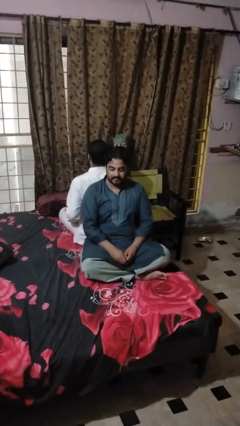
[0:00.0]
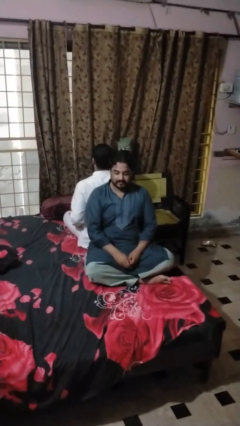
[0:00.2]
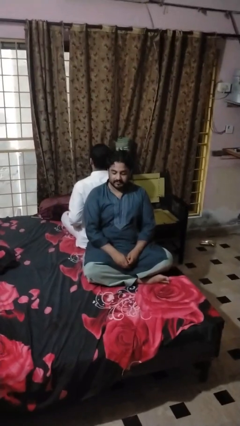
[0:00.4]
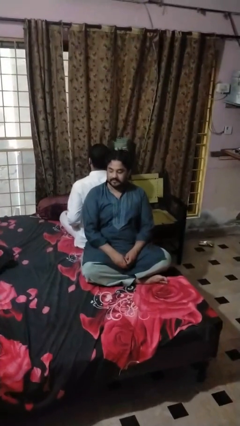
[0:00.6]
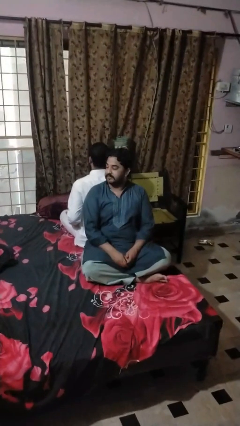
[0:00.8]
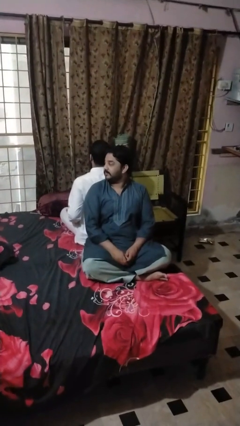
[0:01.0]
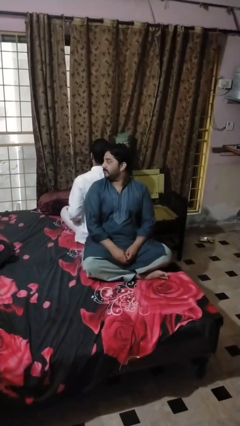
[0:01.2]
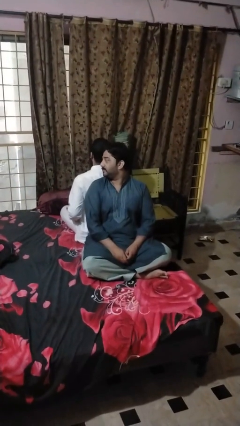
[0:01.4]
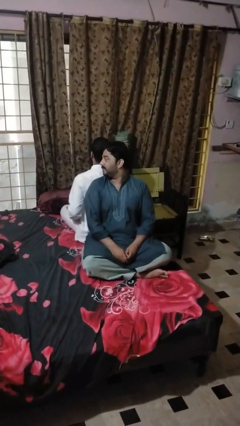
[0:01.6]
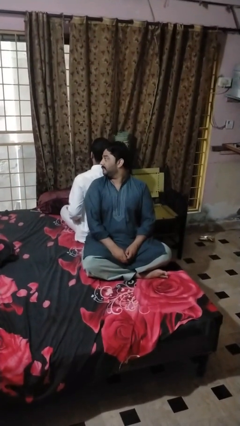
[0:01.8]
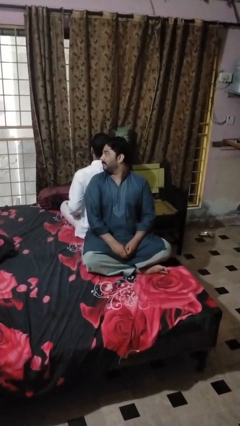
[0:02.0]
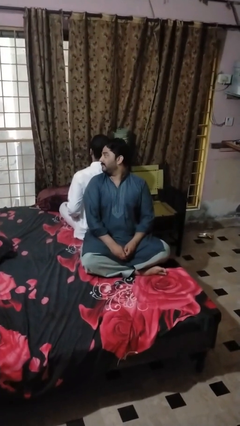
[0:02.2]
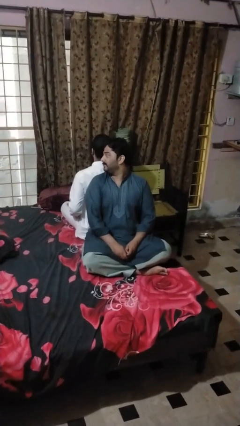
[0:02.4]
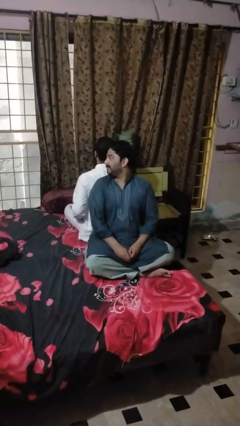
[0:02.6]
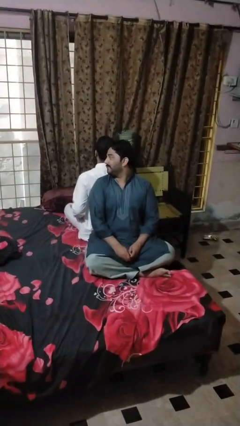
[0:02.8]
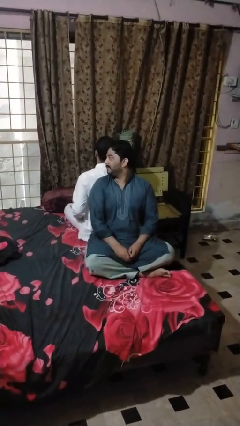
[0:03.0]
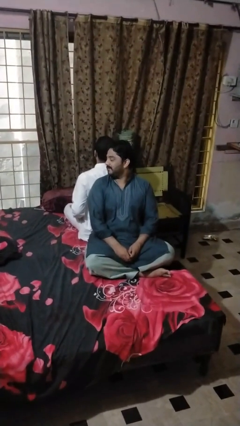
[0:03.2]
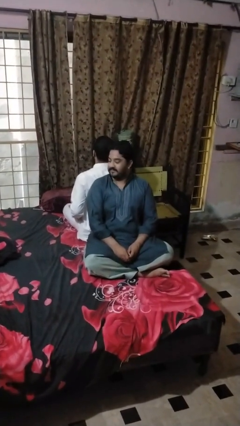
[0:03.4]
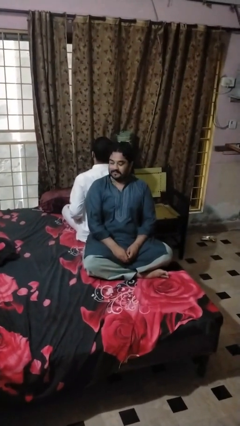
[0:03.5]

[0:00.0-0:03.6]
person looks over shoulder

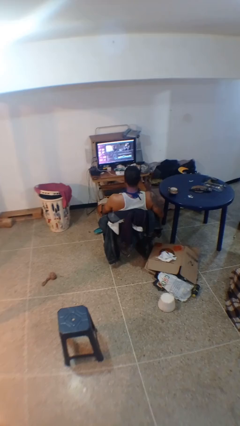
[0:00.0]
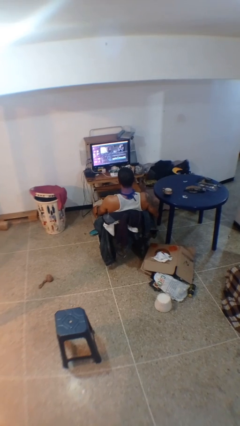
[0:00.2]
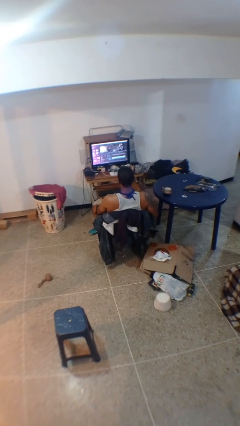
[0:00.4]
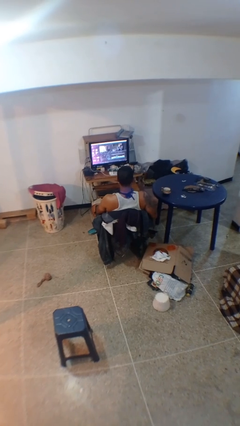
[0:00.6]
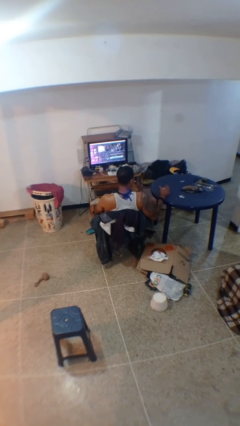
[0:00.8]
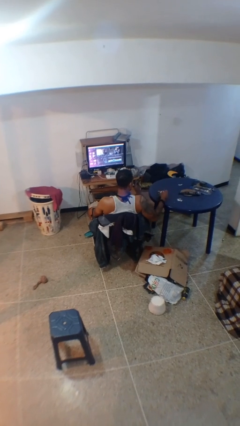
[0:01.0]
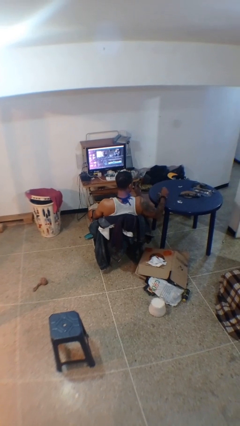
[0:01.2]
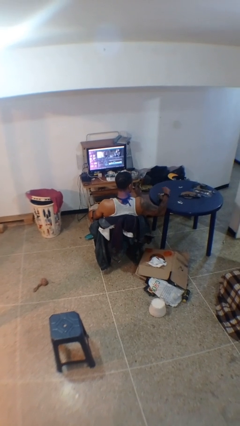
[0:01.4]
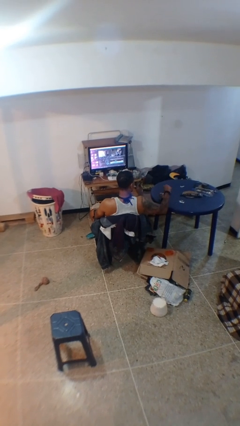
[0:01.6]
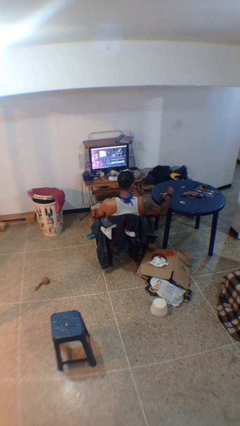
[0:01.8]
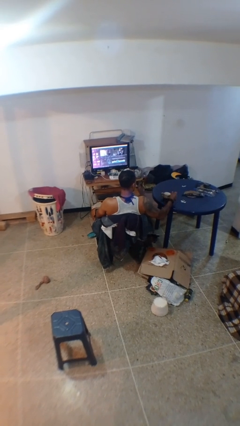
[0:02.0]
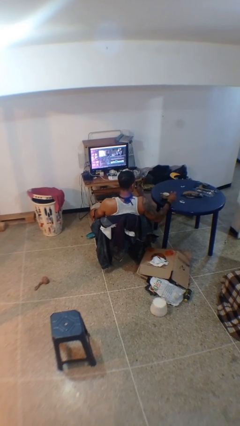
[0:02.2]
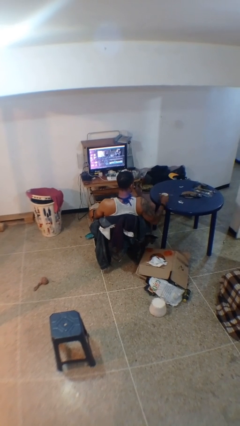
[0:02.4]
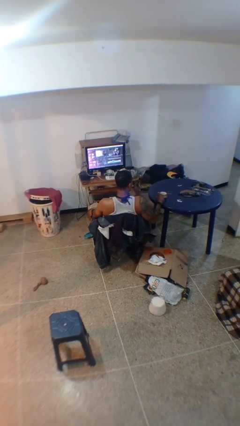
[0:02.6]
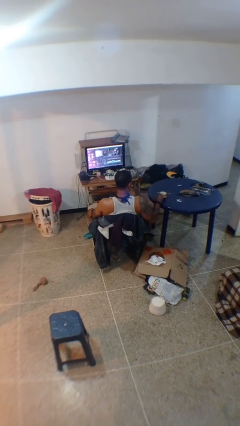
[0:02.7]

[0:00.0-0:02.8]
person stirs mug

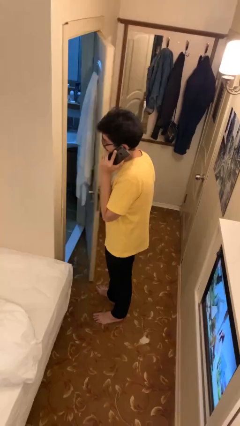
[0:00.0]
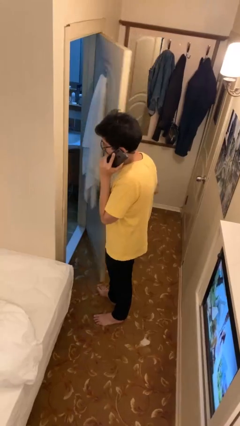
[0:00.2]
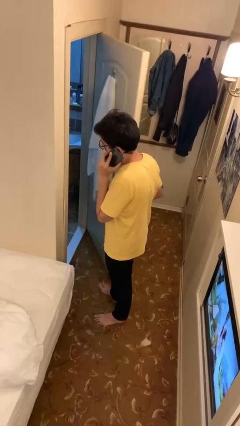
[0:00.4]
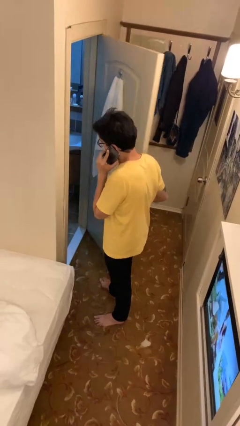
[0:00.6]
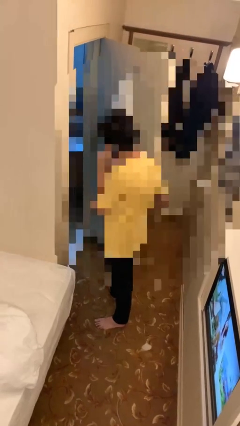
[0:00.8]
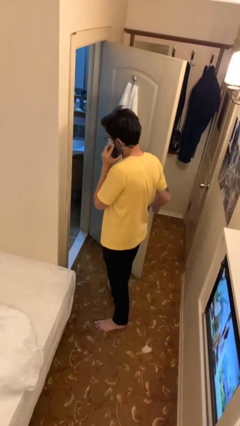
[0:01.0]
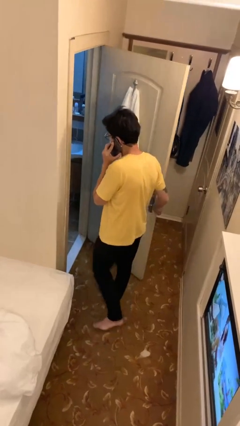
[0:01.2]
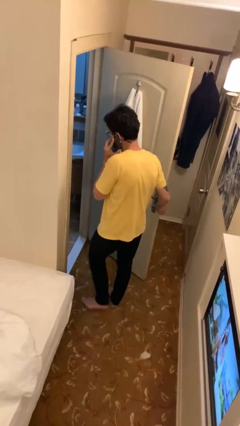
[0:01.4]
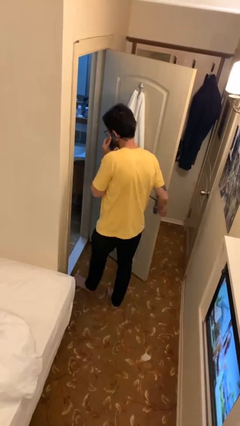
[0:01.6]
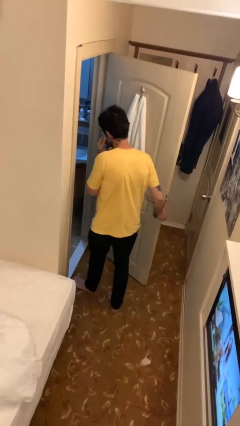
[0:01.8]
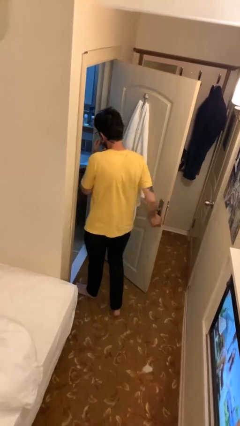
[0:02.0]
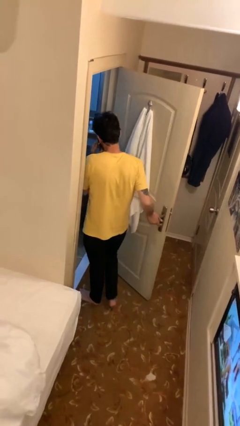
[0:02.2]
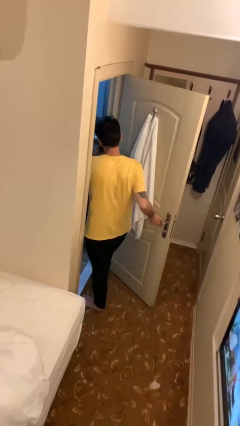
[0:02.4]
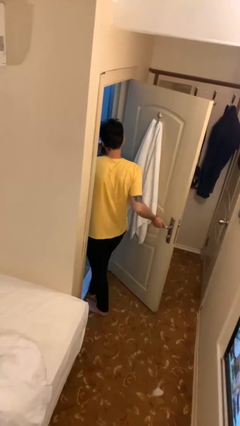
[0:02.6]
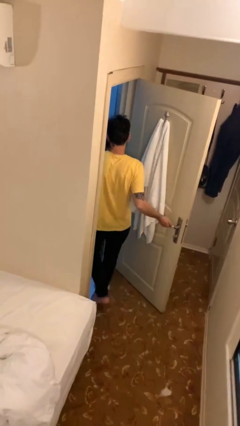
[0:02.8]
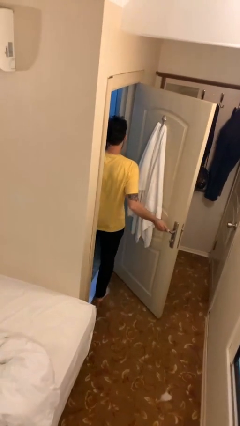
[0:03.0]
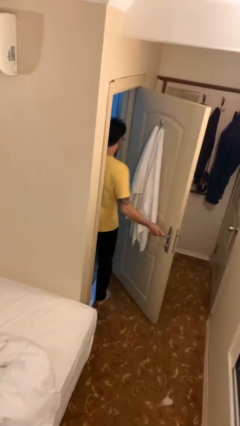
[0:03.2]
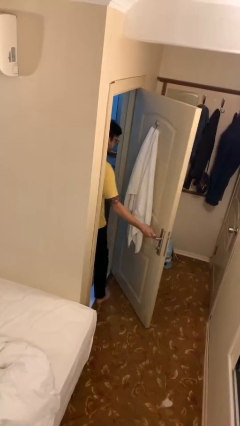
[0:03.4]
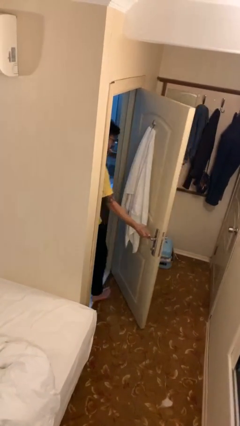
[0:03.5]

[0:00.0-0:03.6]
person exits scene through structure

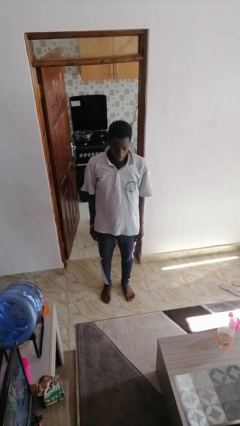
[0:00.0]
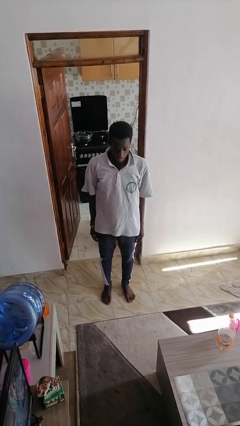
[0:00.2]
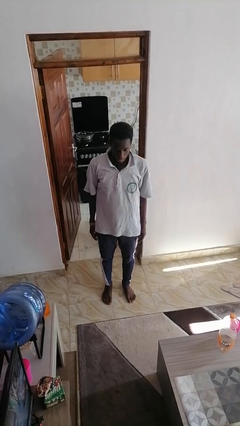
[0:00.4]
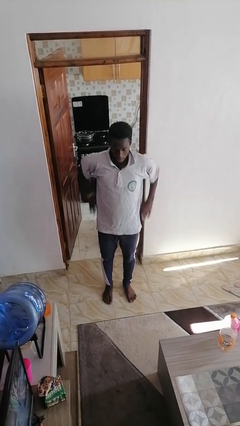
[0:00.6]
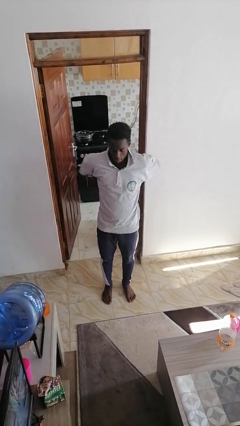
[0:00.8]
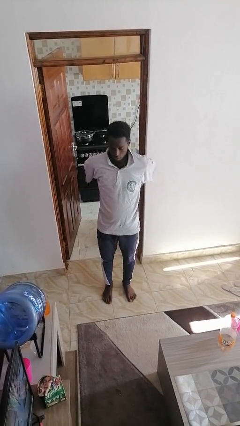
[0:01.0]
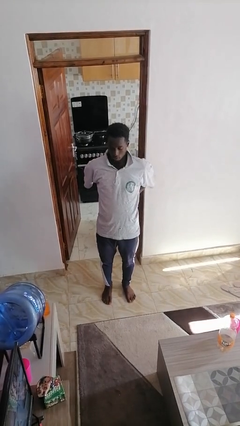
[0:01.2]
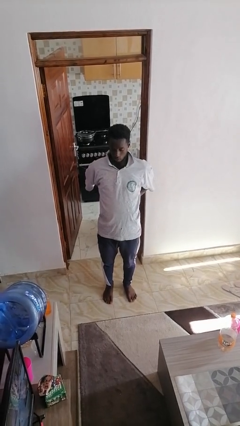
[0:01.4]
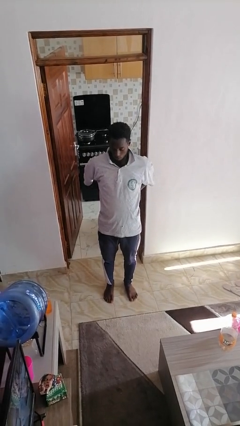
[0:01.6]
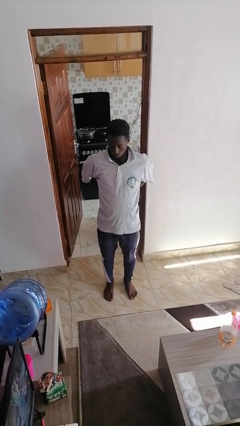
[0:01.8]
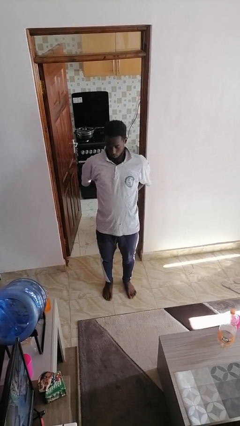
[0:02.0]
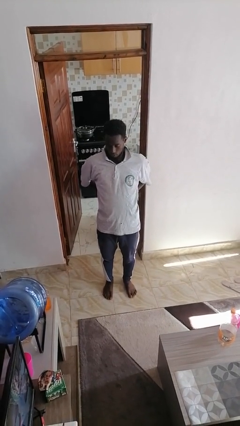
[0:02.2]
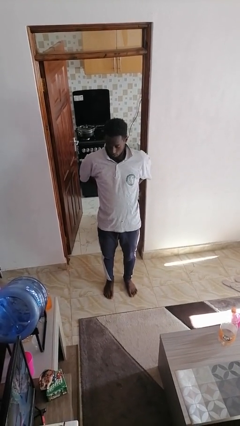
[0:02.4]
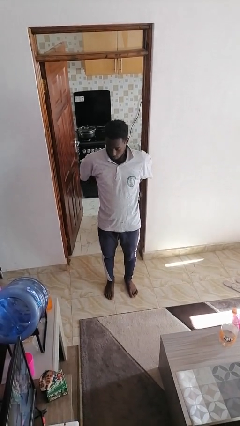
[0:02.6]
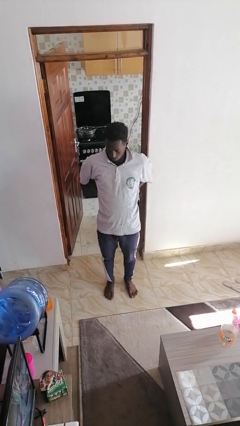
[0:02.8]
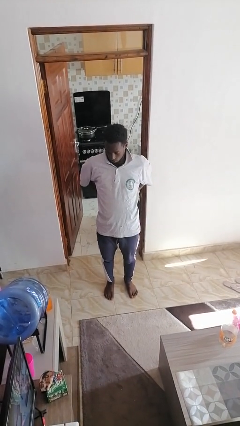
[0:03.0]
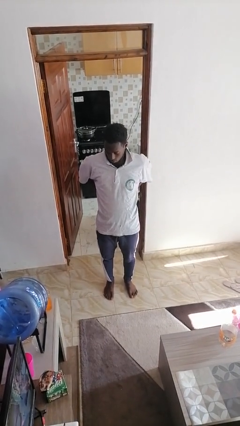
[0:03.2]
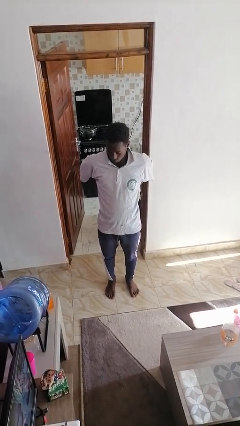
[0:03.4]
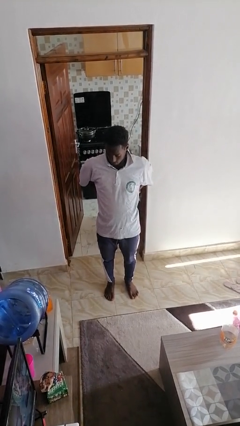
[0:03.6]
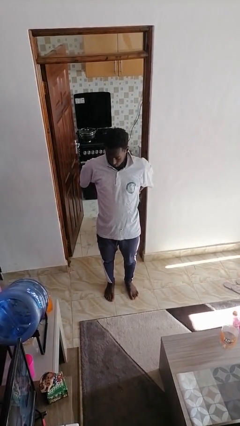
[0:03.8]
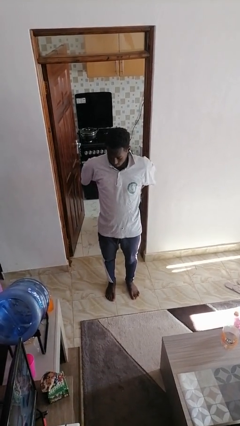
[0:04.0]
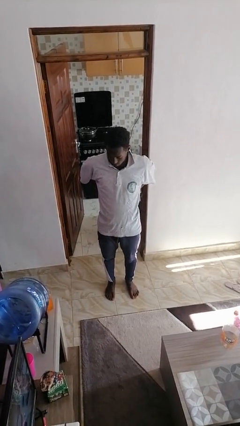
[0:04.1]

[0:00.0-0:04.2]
person stretches back

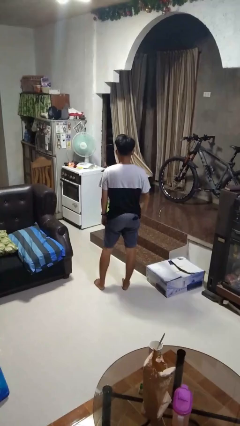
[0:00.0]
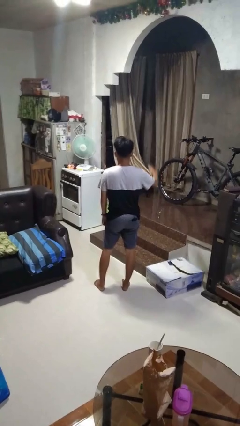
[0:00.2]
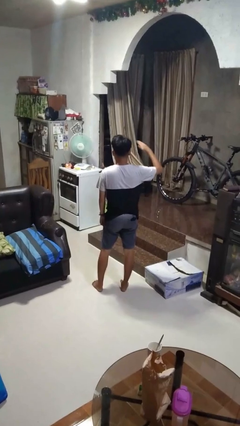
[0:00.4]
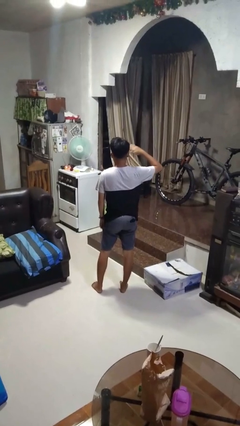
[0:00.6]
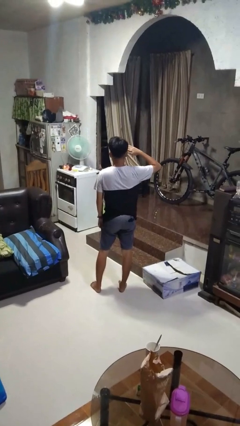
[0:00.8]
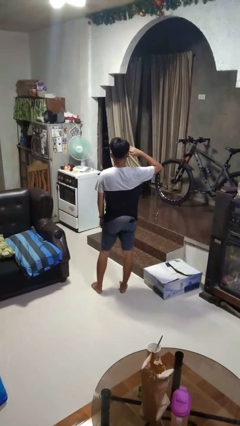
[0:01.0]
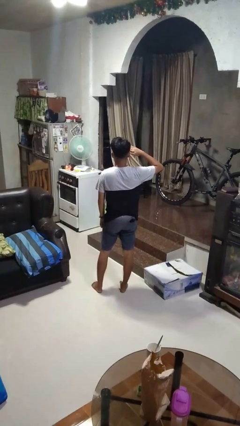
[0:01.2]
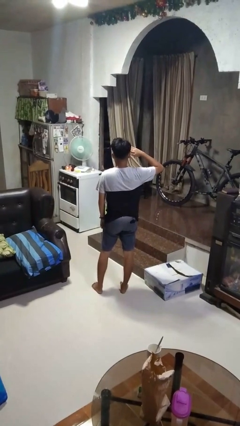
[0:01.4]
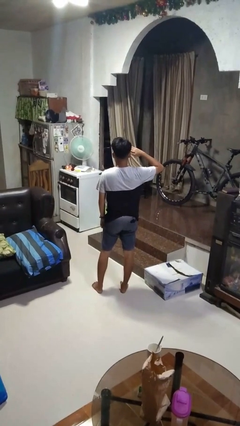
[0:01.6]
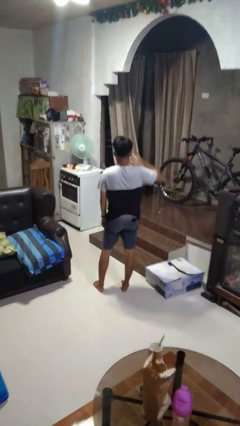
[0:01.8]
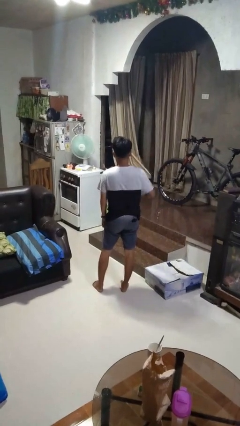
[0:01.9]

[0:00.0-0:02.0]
person salutes

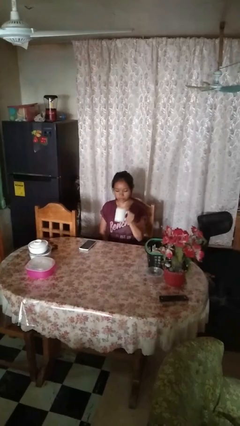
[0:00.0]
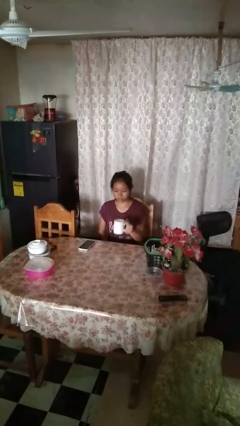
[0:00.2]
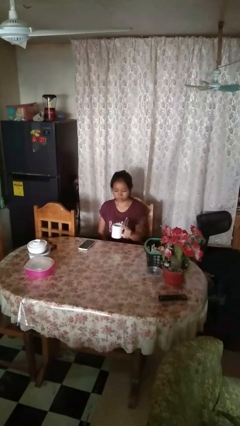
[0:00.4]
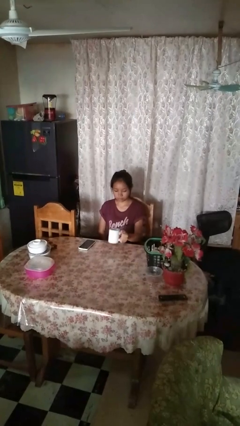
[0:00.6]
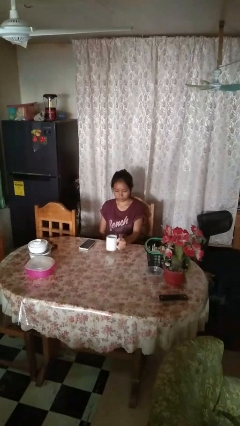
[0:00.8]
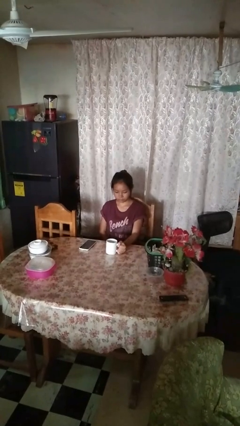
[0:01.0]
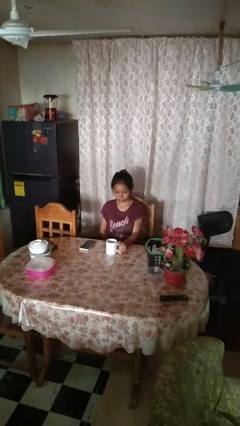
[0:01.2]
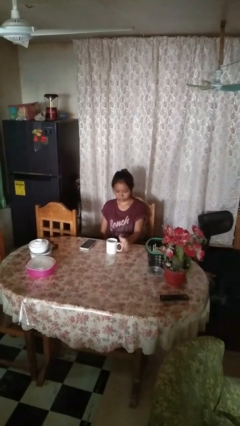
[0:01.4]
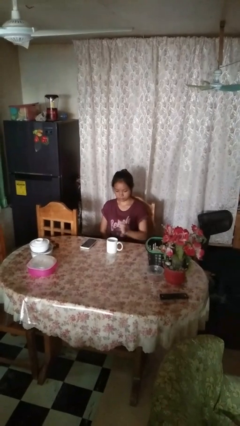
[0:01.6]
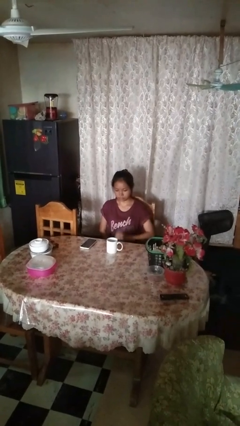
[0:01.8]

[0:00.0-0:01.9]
person puts down object on table
